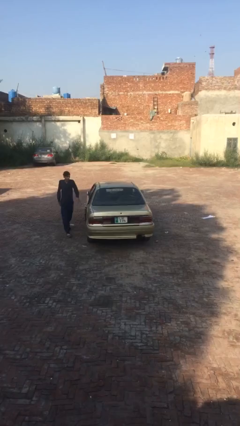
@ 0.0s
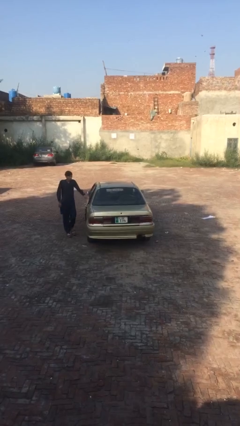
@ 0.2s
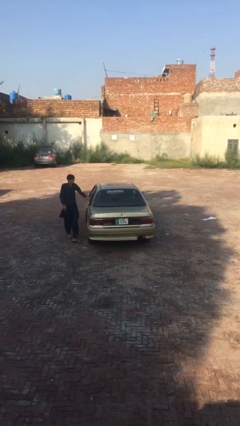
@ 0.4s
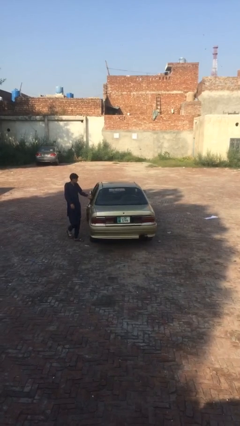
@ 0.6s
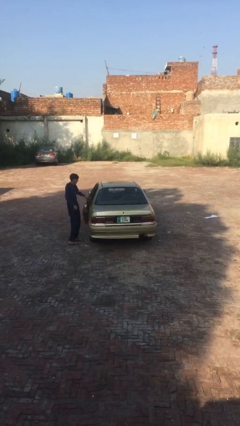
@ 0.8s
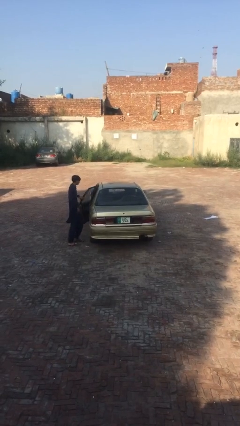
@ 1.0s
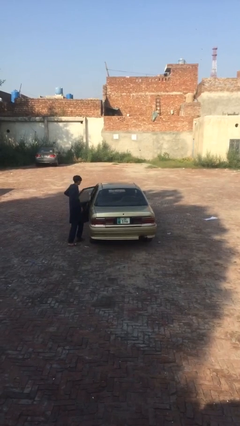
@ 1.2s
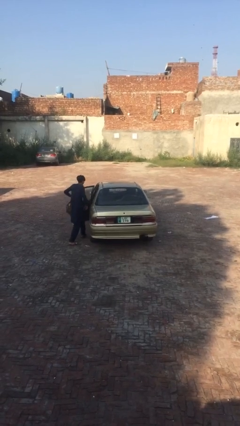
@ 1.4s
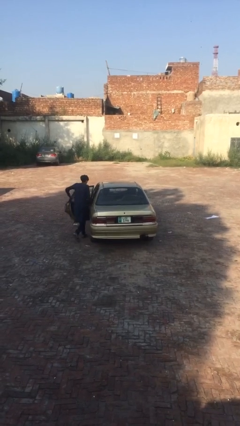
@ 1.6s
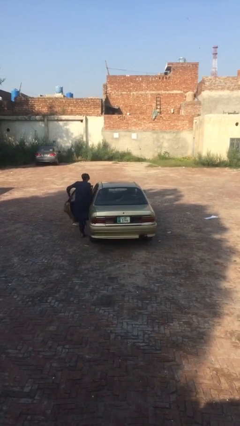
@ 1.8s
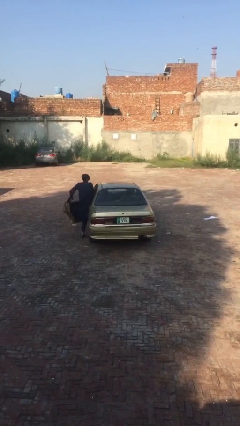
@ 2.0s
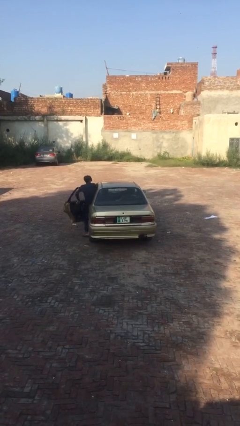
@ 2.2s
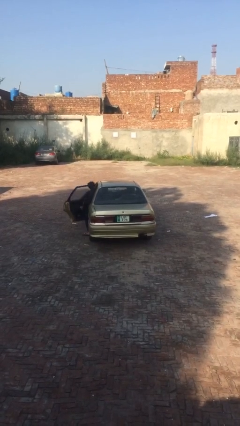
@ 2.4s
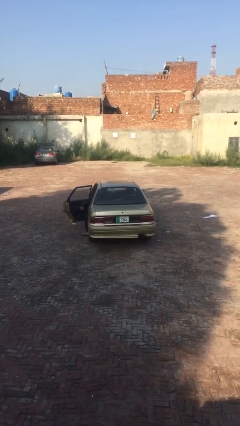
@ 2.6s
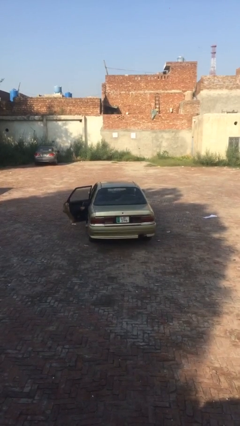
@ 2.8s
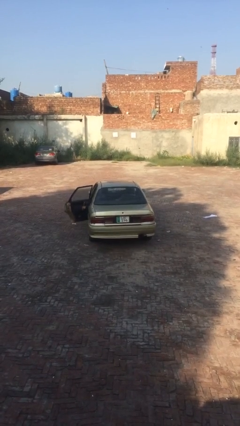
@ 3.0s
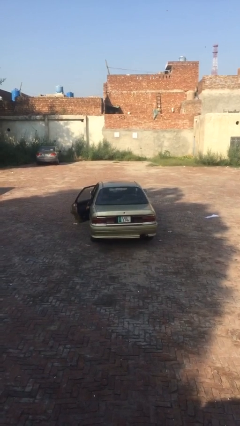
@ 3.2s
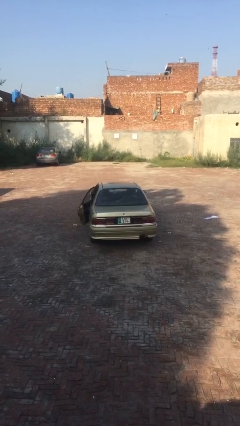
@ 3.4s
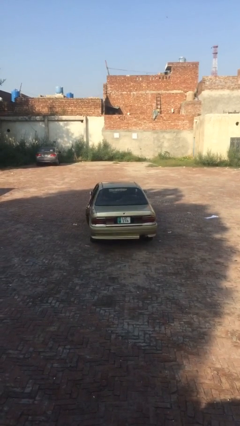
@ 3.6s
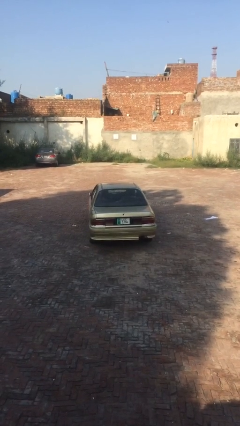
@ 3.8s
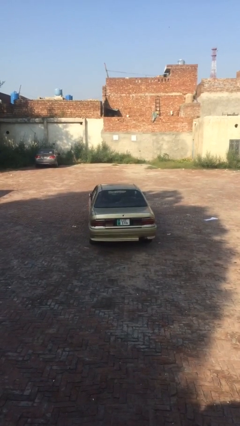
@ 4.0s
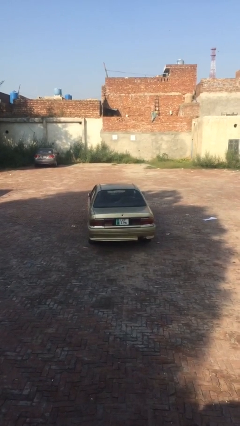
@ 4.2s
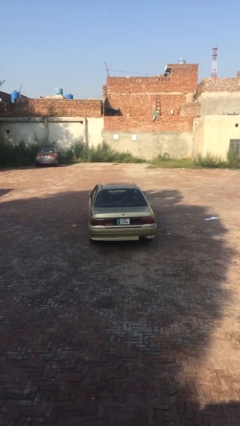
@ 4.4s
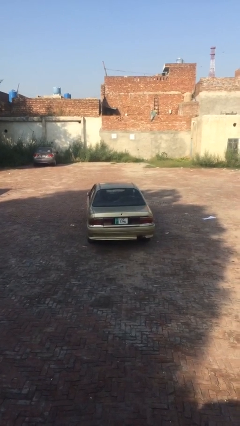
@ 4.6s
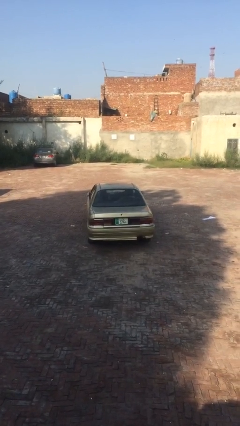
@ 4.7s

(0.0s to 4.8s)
car picks up person

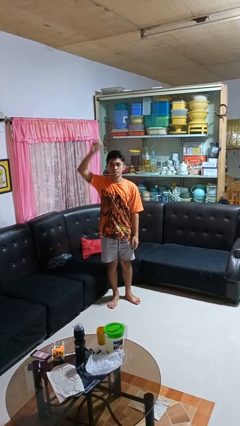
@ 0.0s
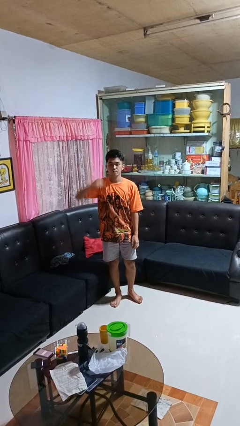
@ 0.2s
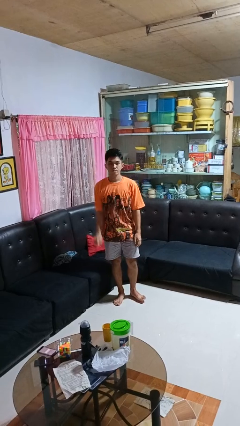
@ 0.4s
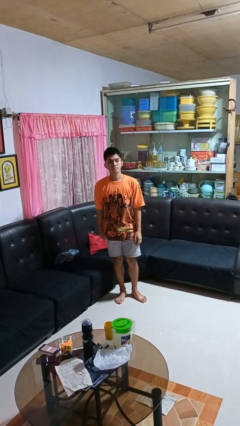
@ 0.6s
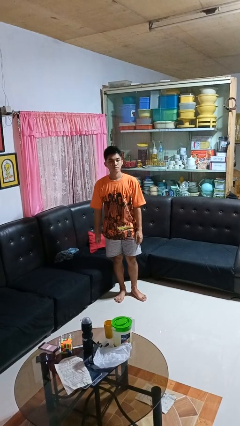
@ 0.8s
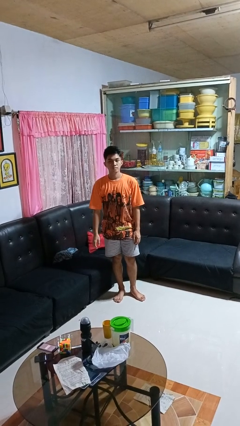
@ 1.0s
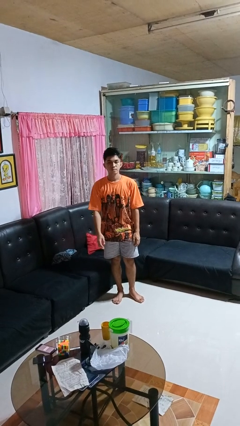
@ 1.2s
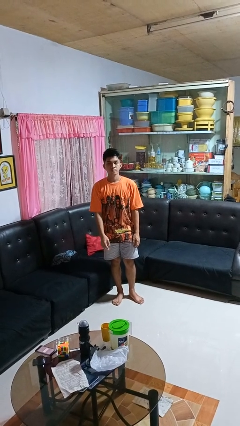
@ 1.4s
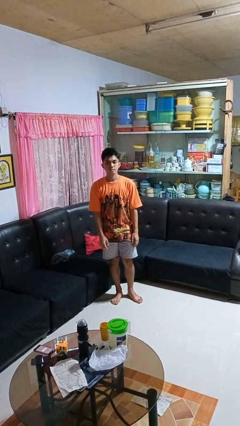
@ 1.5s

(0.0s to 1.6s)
person gestures lower hand

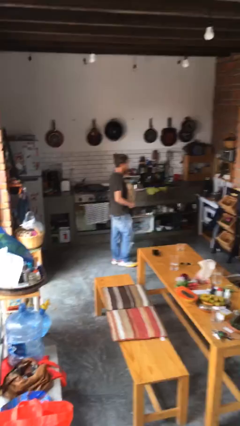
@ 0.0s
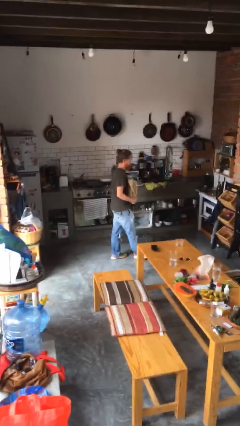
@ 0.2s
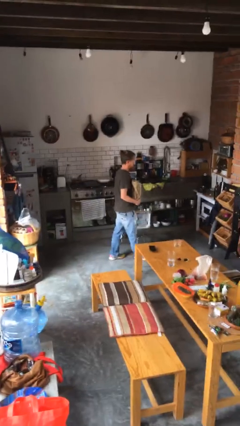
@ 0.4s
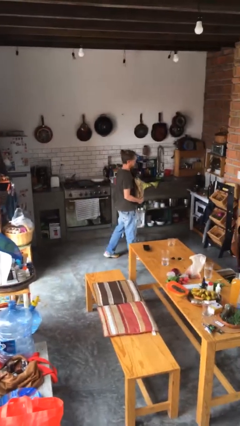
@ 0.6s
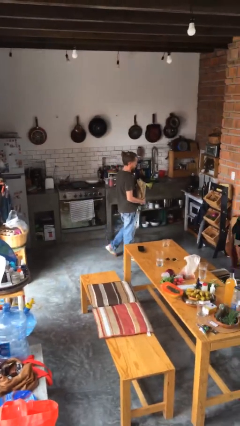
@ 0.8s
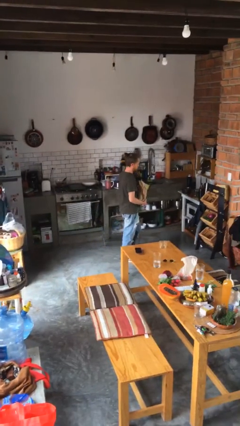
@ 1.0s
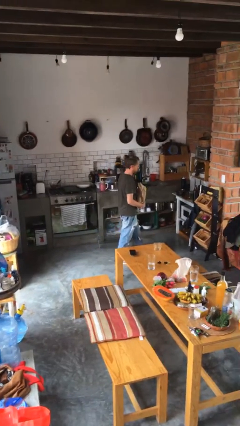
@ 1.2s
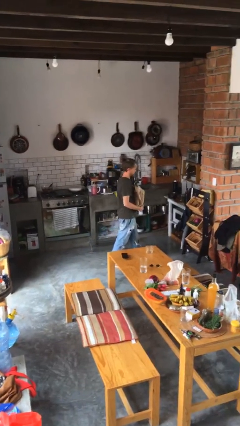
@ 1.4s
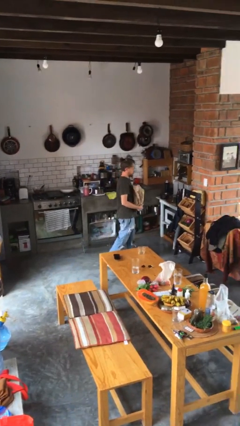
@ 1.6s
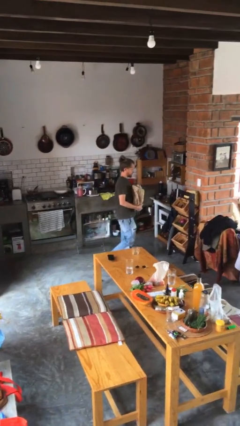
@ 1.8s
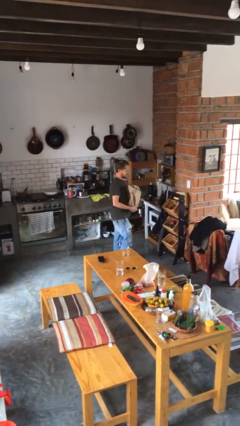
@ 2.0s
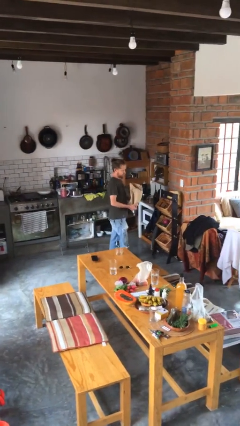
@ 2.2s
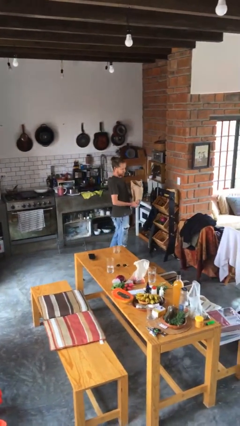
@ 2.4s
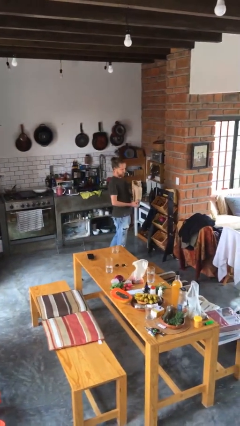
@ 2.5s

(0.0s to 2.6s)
person carries groceries

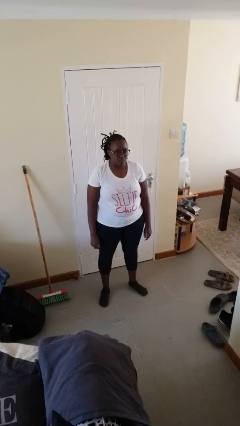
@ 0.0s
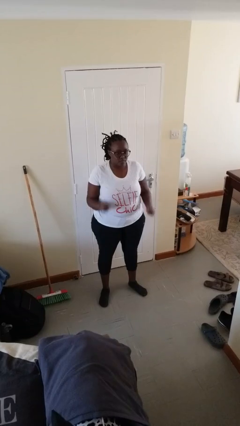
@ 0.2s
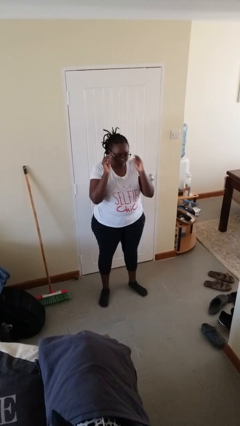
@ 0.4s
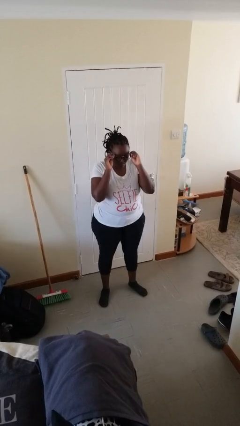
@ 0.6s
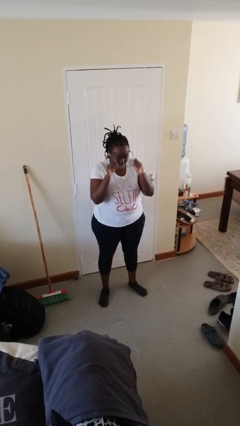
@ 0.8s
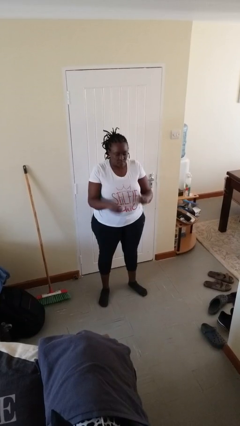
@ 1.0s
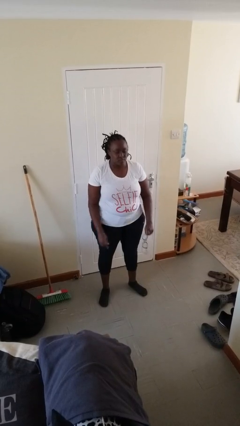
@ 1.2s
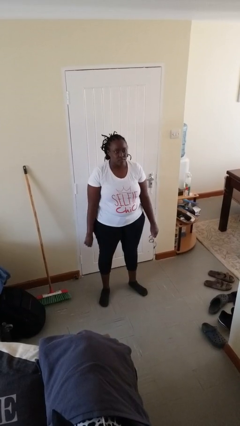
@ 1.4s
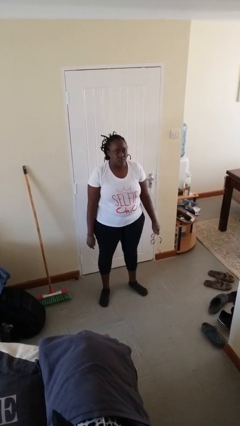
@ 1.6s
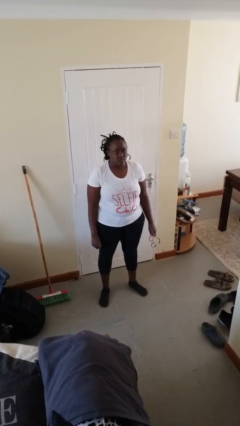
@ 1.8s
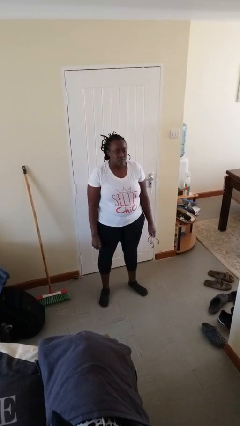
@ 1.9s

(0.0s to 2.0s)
person takes off glasses

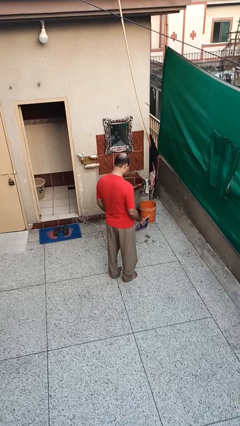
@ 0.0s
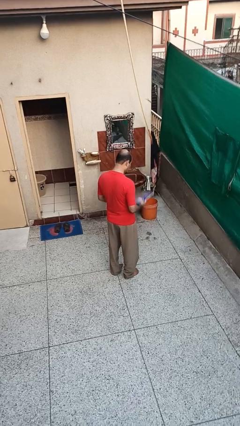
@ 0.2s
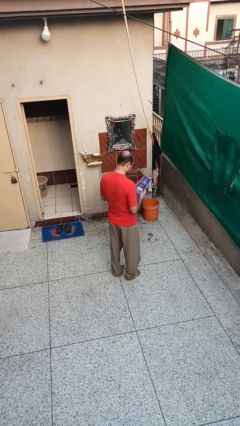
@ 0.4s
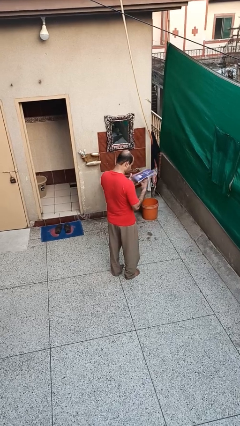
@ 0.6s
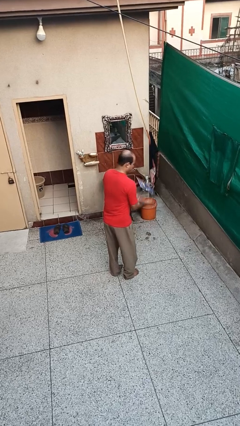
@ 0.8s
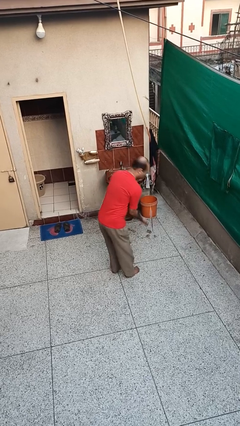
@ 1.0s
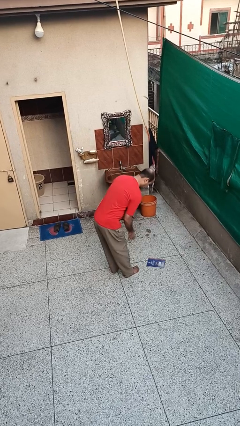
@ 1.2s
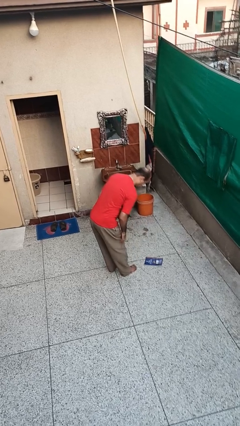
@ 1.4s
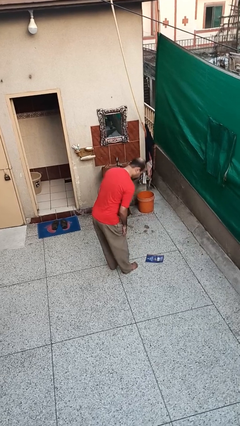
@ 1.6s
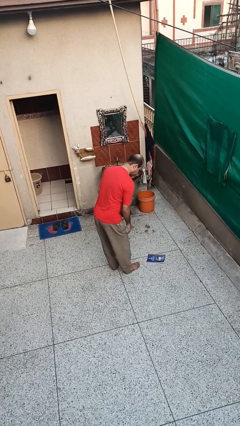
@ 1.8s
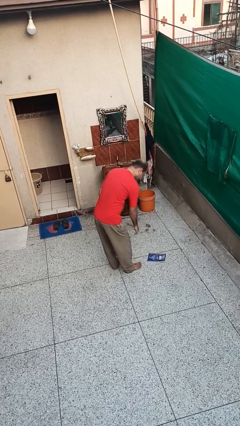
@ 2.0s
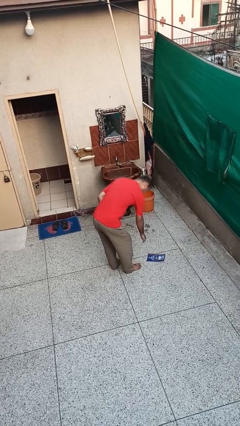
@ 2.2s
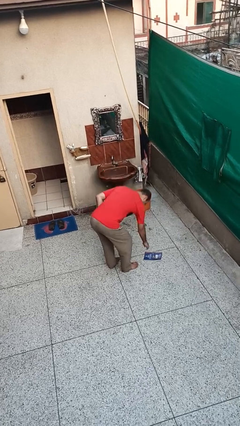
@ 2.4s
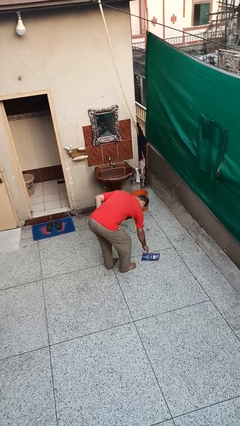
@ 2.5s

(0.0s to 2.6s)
person drops object

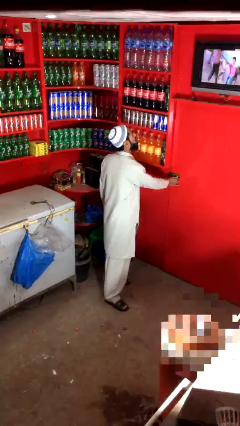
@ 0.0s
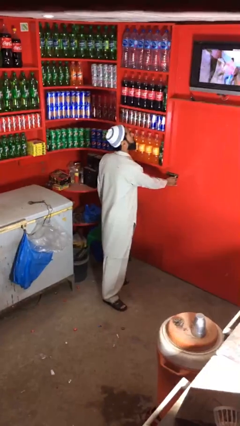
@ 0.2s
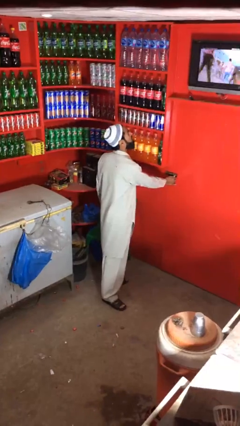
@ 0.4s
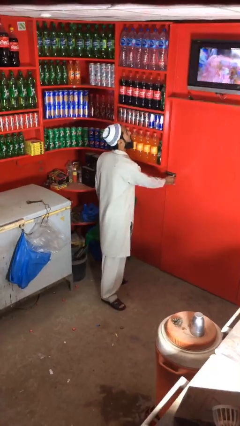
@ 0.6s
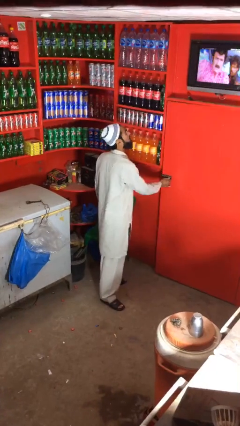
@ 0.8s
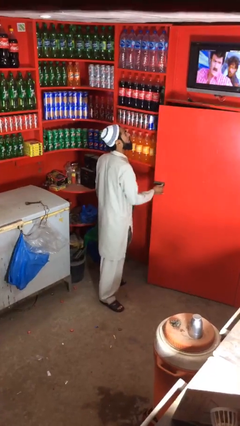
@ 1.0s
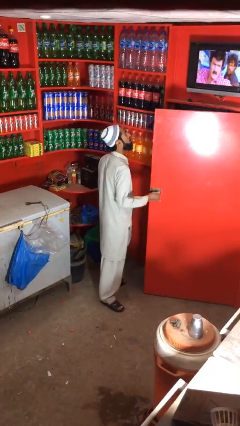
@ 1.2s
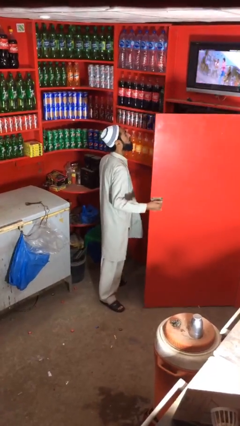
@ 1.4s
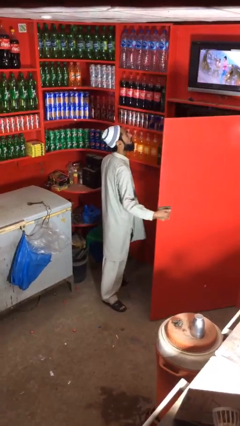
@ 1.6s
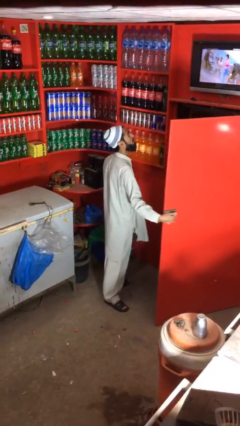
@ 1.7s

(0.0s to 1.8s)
person opens facility door

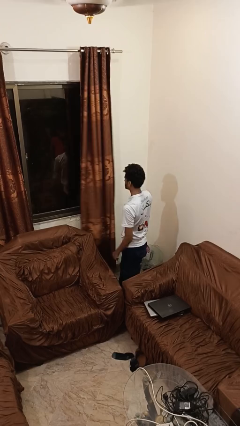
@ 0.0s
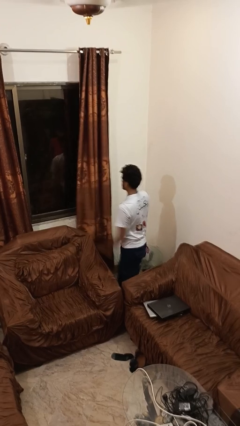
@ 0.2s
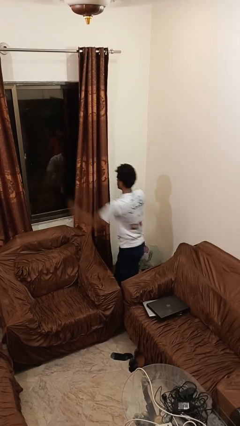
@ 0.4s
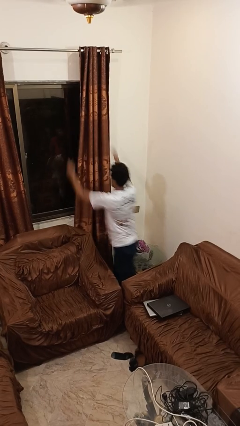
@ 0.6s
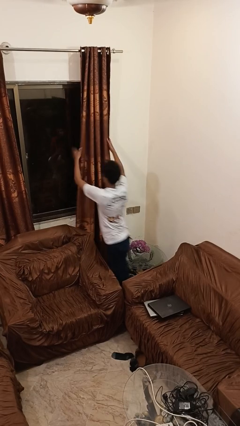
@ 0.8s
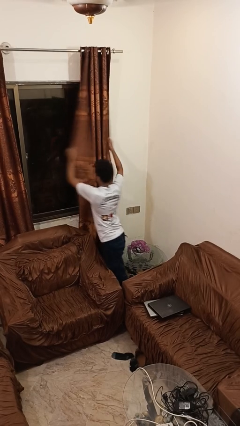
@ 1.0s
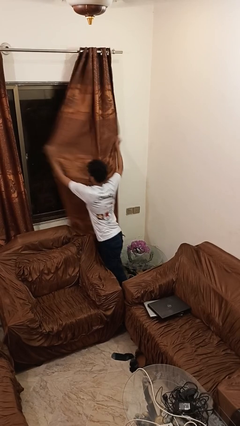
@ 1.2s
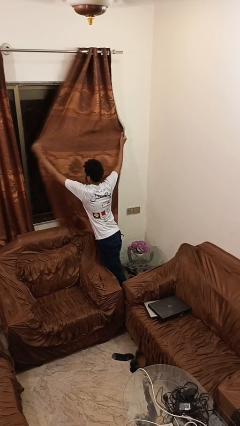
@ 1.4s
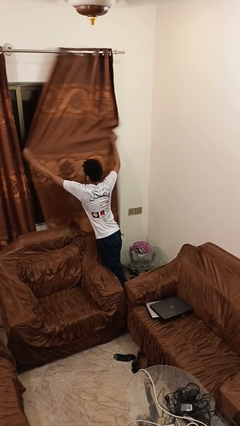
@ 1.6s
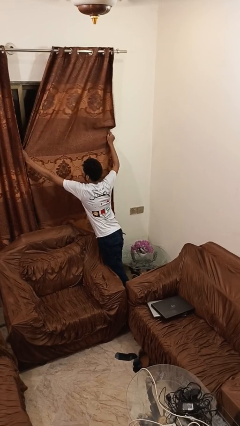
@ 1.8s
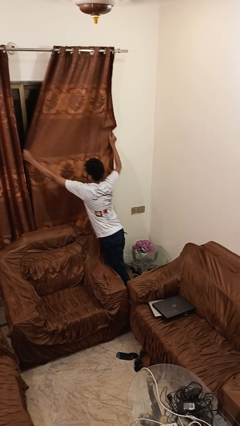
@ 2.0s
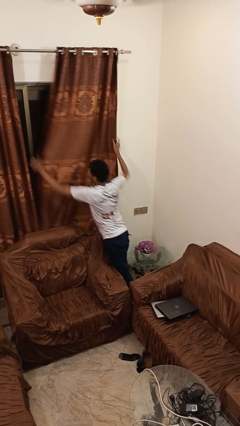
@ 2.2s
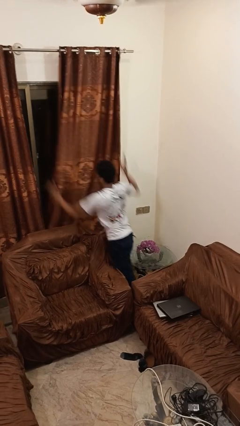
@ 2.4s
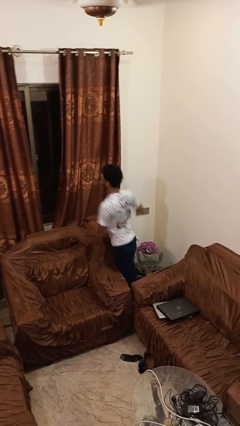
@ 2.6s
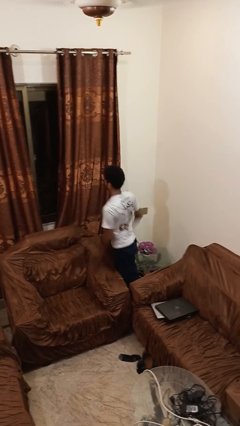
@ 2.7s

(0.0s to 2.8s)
person closes curtains
